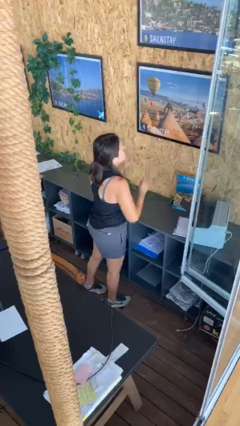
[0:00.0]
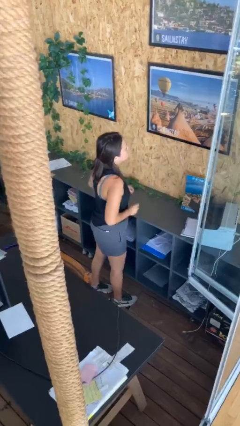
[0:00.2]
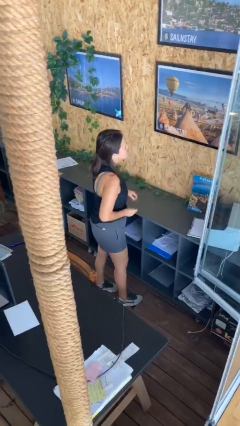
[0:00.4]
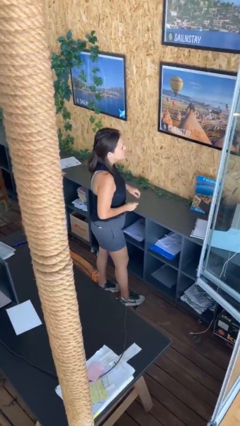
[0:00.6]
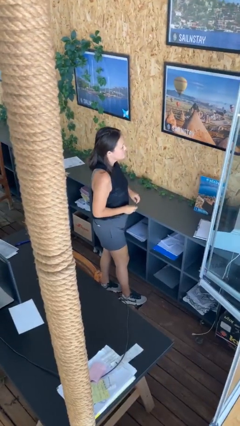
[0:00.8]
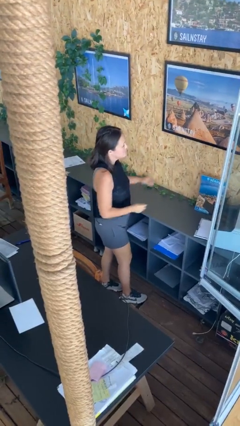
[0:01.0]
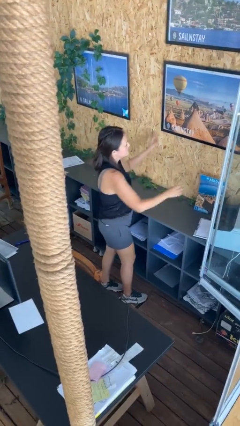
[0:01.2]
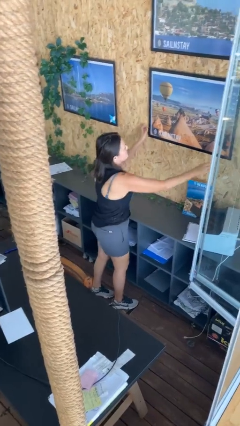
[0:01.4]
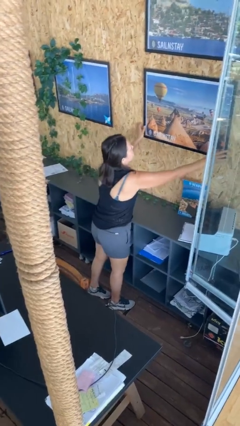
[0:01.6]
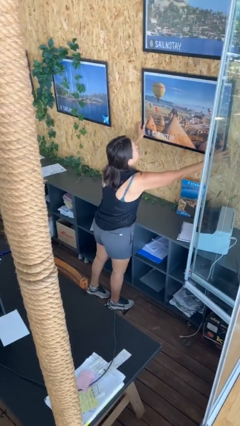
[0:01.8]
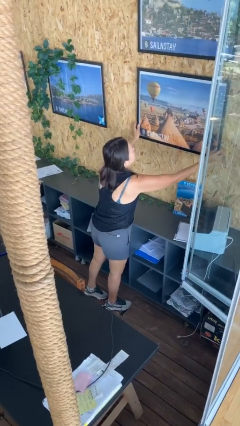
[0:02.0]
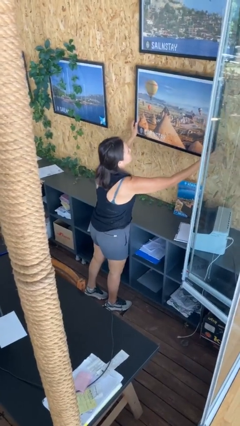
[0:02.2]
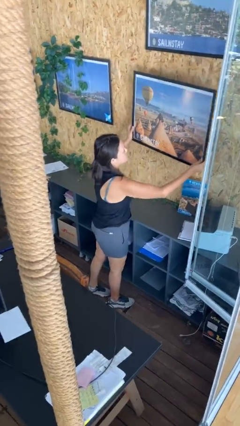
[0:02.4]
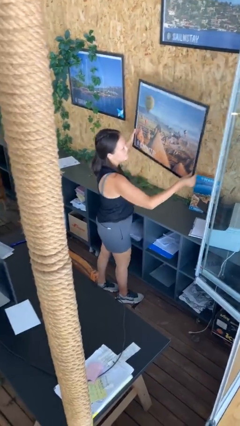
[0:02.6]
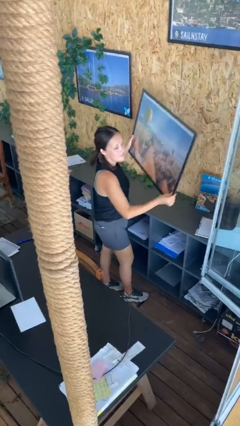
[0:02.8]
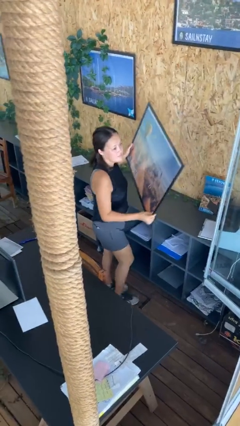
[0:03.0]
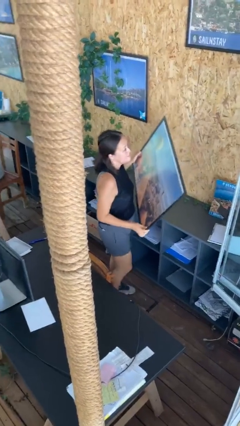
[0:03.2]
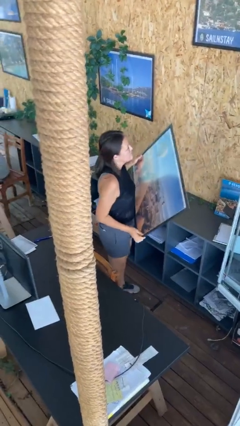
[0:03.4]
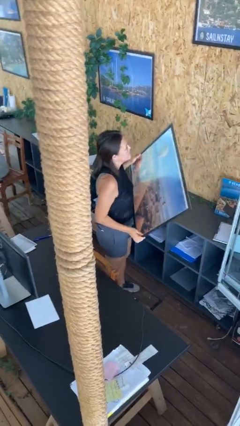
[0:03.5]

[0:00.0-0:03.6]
person takes down picture frame

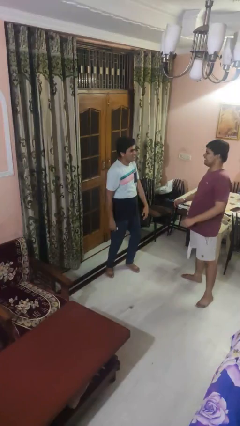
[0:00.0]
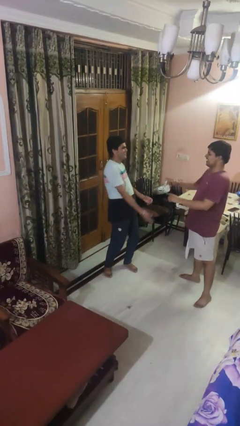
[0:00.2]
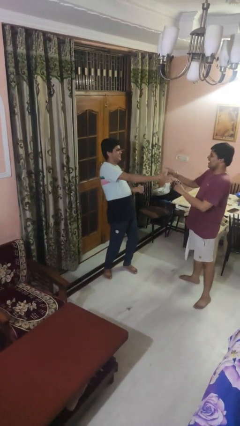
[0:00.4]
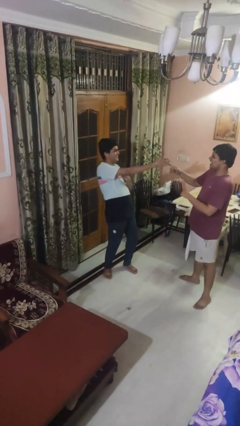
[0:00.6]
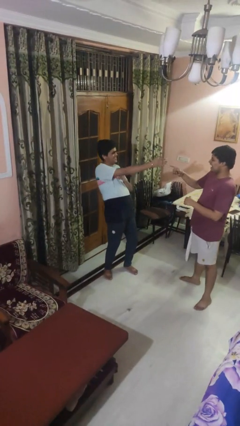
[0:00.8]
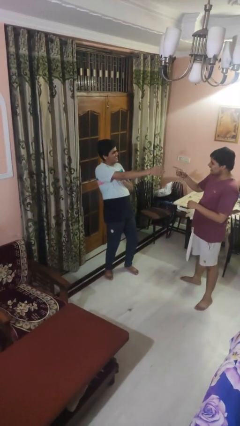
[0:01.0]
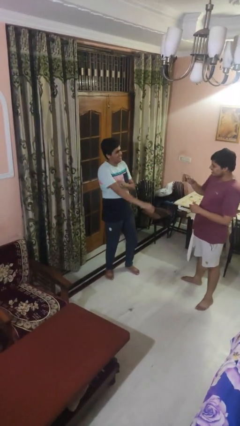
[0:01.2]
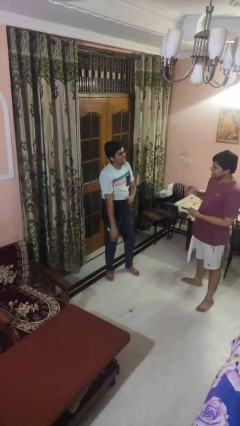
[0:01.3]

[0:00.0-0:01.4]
person laughs with person

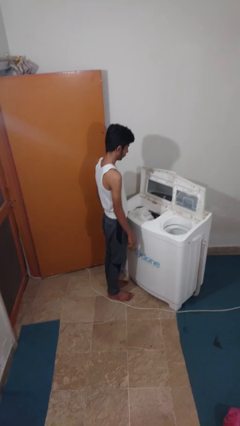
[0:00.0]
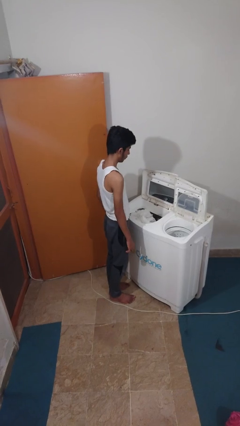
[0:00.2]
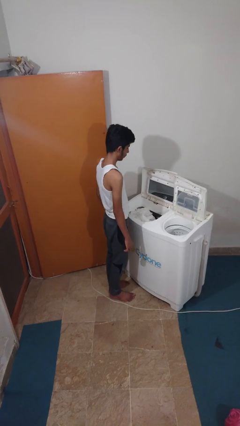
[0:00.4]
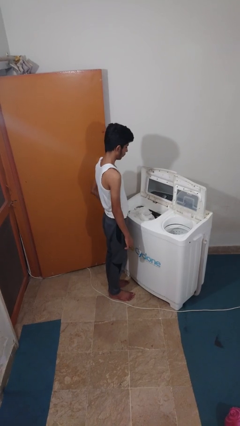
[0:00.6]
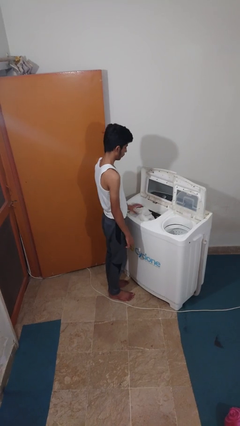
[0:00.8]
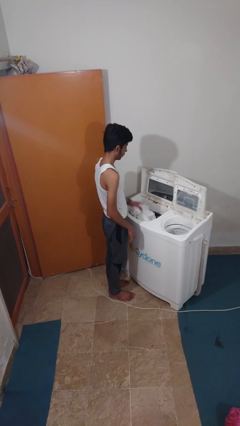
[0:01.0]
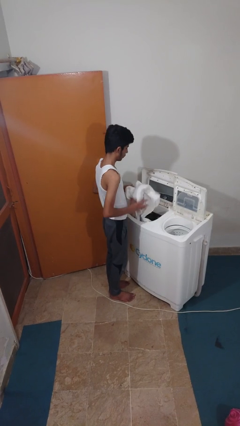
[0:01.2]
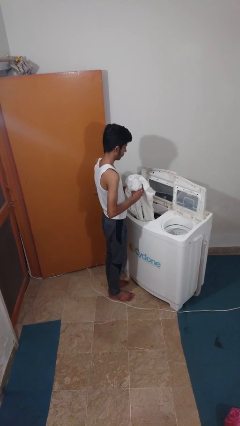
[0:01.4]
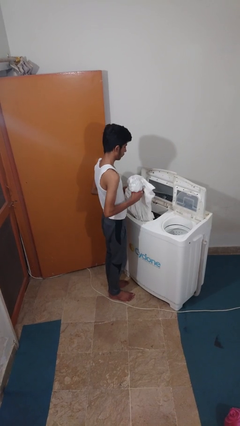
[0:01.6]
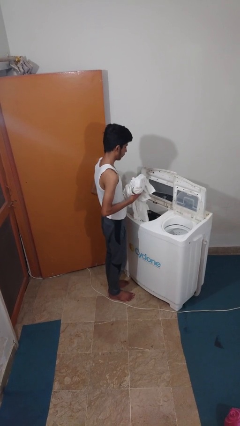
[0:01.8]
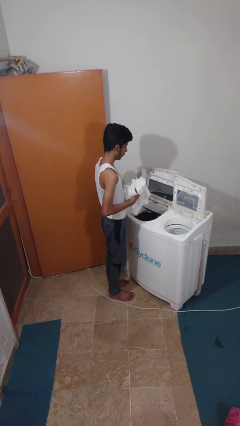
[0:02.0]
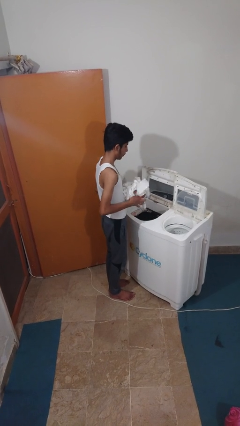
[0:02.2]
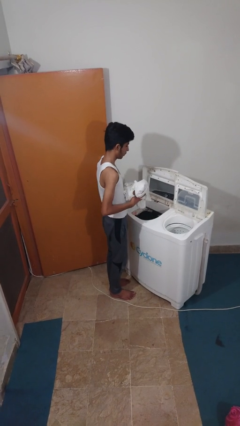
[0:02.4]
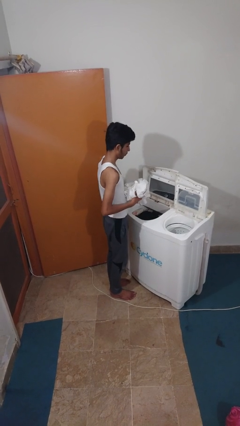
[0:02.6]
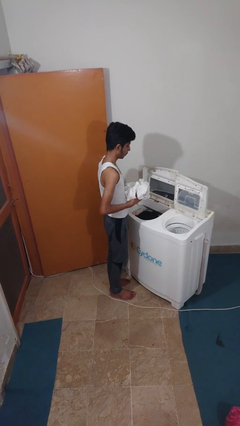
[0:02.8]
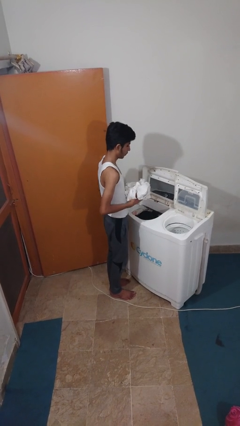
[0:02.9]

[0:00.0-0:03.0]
person unloads clotheswasher

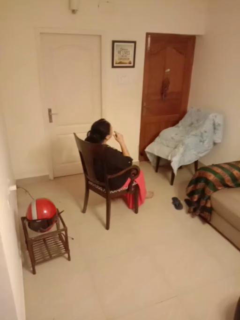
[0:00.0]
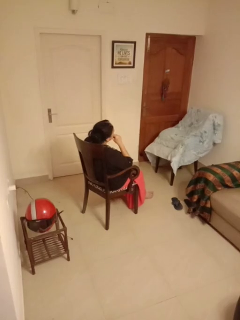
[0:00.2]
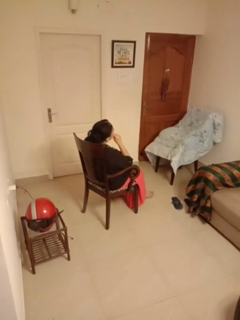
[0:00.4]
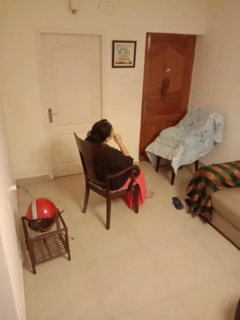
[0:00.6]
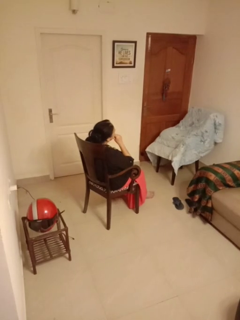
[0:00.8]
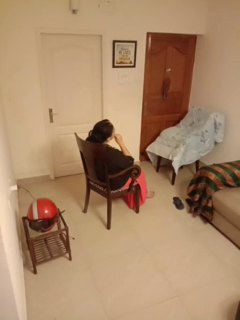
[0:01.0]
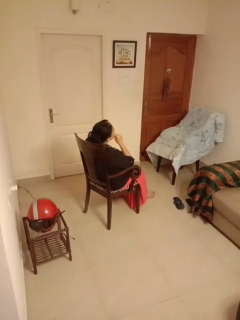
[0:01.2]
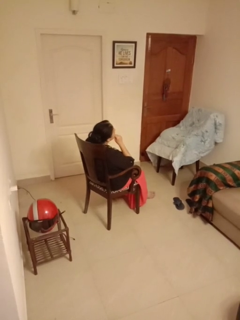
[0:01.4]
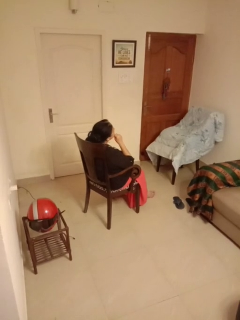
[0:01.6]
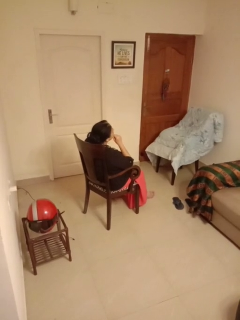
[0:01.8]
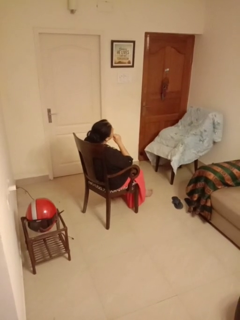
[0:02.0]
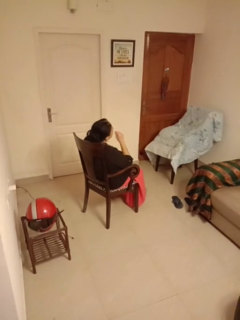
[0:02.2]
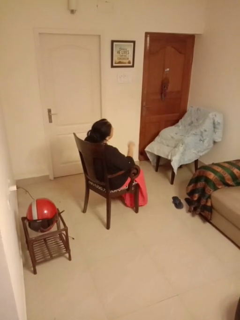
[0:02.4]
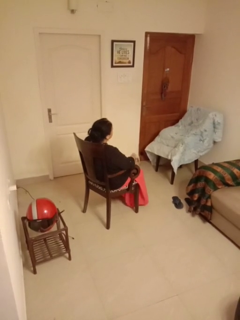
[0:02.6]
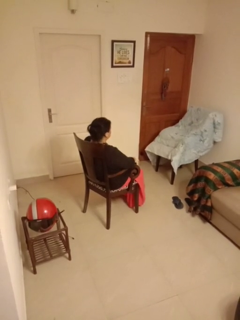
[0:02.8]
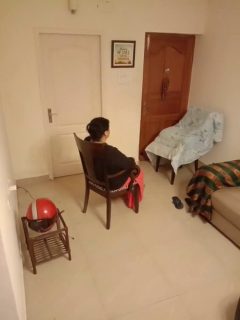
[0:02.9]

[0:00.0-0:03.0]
person strokes chin

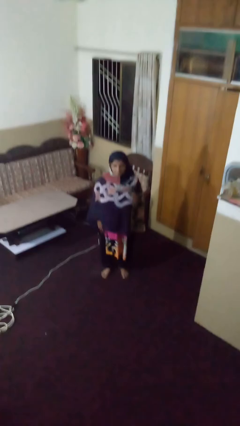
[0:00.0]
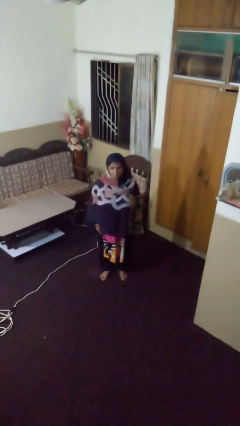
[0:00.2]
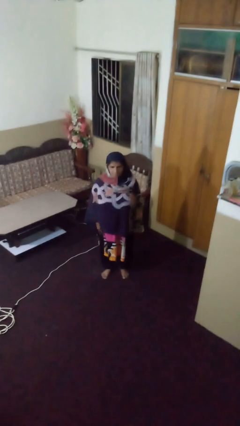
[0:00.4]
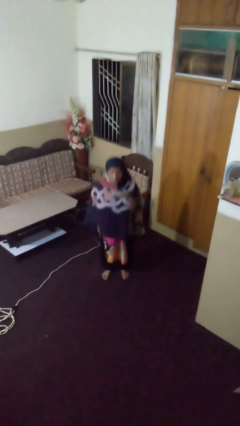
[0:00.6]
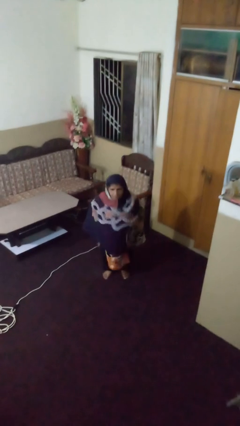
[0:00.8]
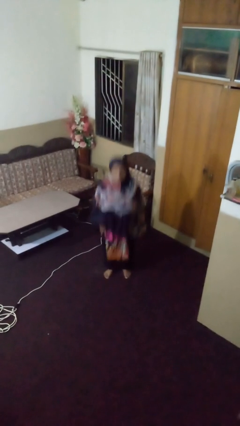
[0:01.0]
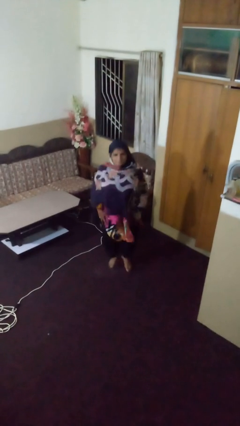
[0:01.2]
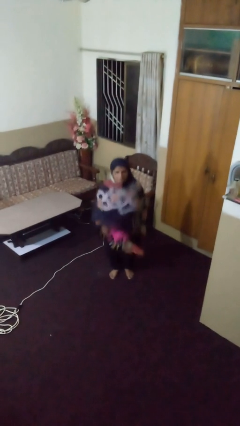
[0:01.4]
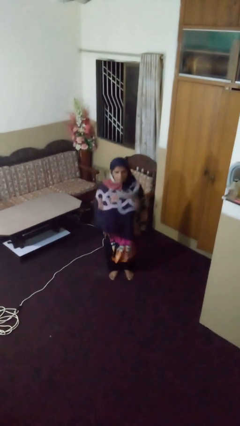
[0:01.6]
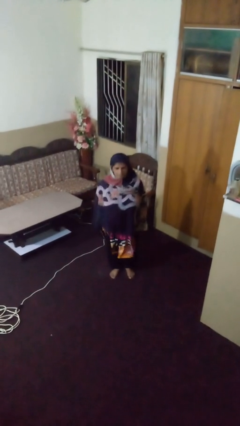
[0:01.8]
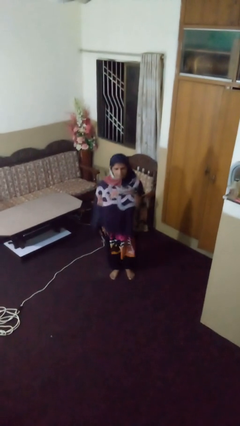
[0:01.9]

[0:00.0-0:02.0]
person jumps

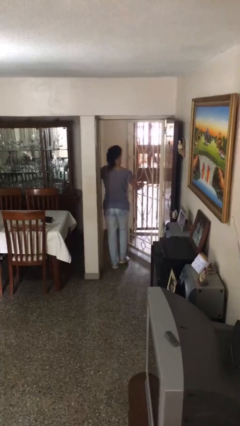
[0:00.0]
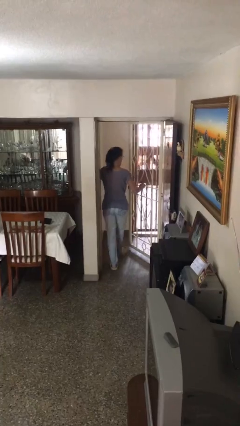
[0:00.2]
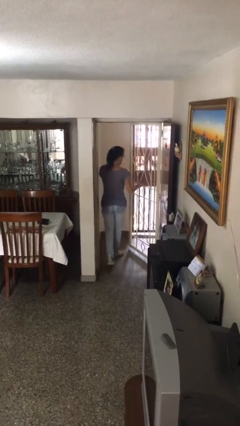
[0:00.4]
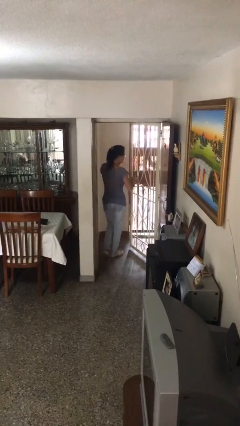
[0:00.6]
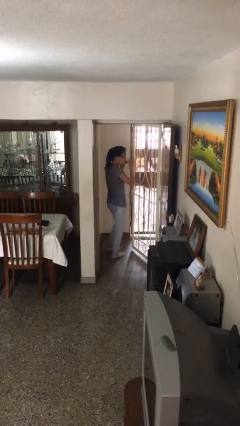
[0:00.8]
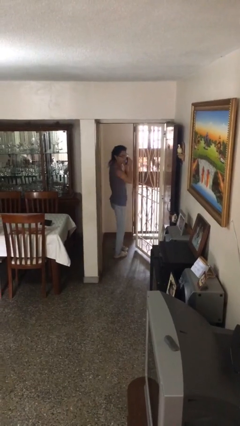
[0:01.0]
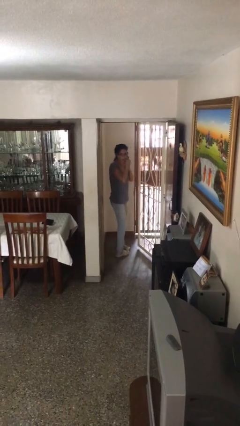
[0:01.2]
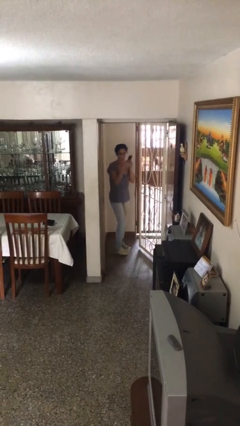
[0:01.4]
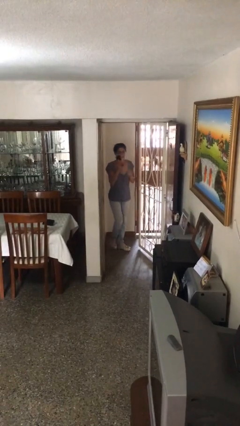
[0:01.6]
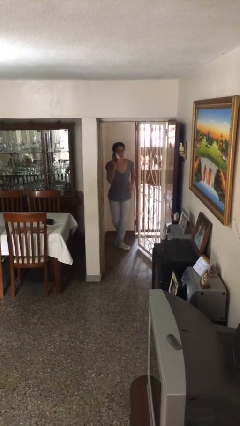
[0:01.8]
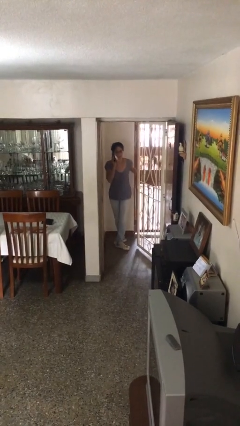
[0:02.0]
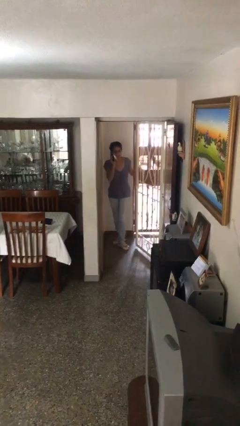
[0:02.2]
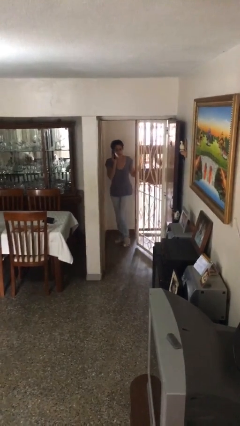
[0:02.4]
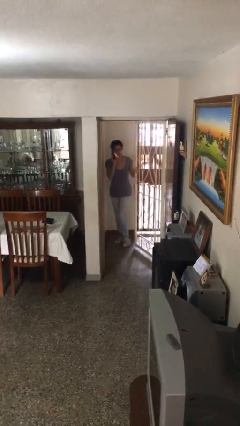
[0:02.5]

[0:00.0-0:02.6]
person exits scene through structure

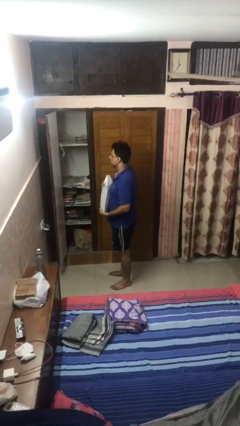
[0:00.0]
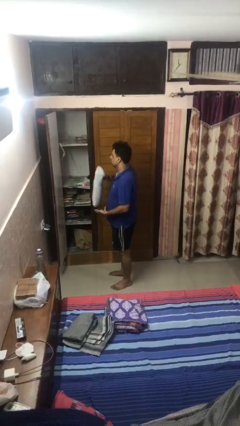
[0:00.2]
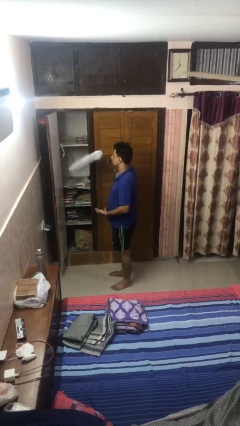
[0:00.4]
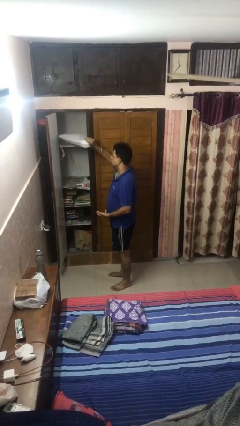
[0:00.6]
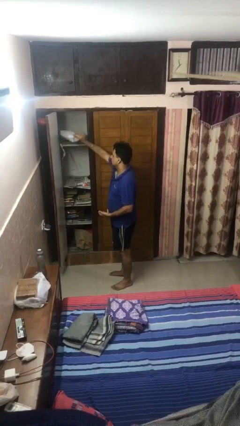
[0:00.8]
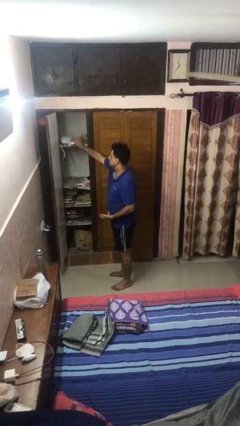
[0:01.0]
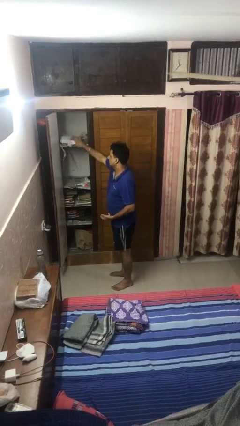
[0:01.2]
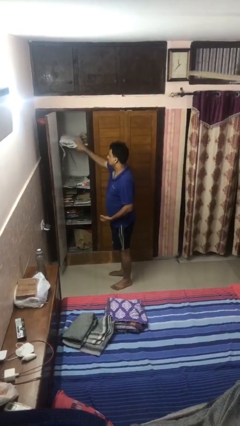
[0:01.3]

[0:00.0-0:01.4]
person puts down object on shelf

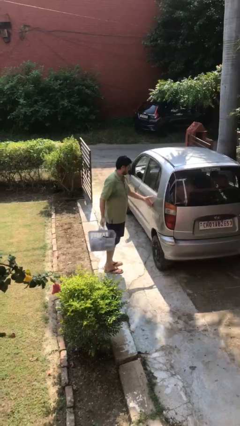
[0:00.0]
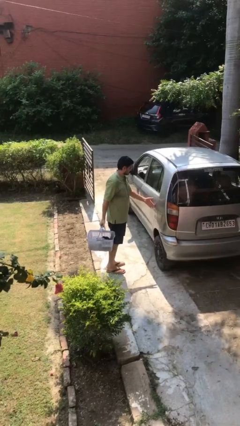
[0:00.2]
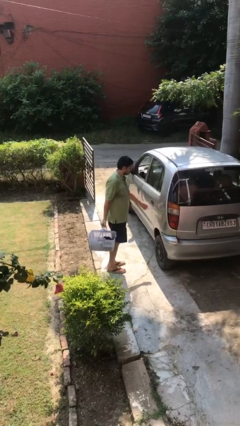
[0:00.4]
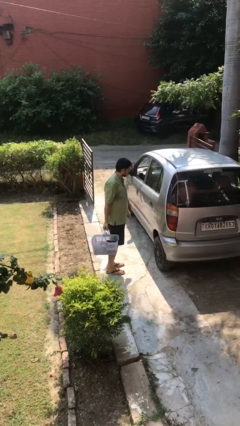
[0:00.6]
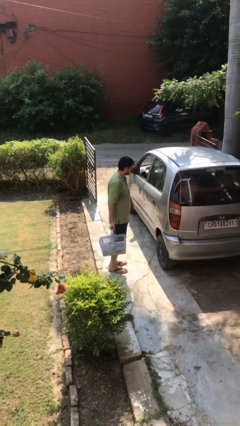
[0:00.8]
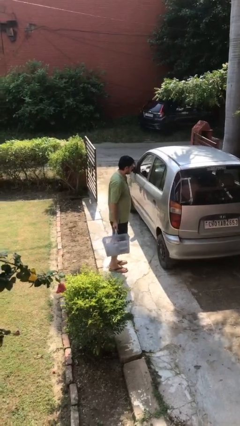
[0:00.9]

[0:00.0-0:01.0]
person closes car door
